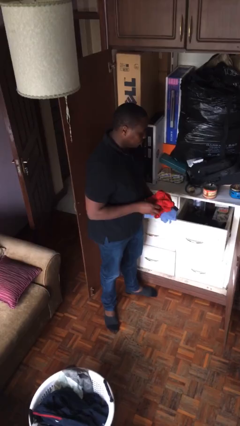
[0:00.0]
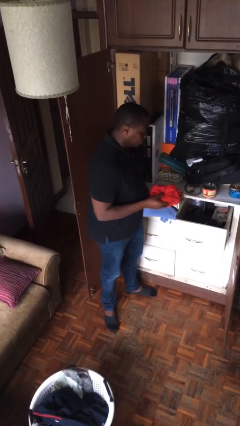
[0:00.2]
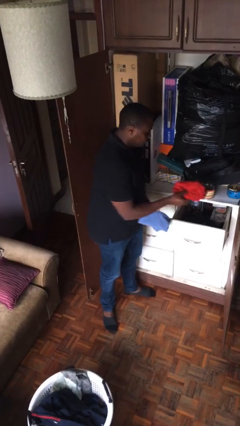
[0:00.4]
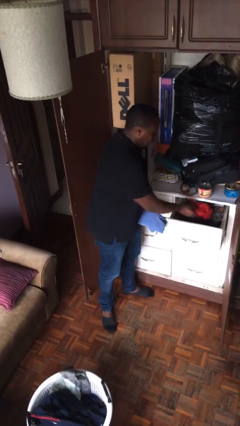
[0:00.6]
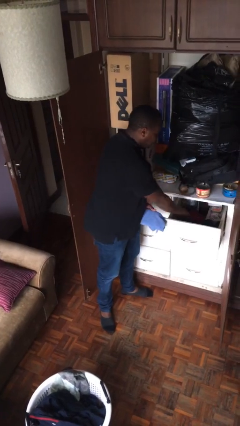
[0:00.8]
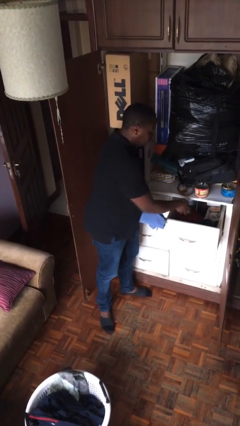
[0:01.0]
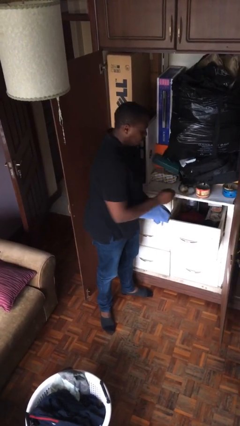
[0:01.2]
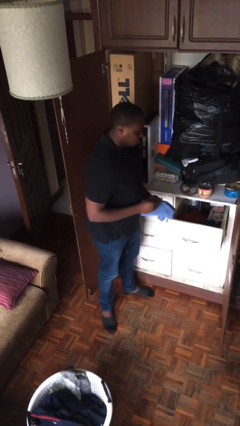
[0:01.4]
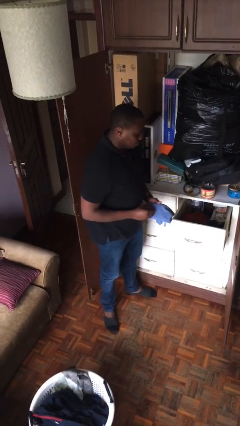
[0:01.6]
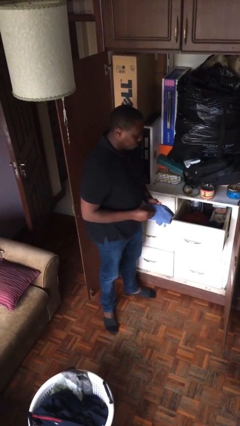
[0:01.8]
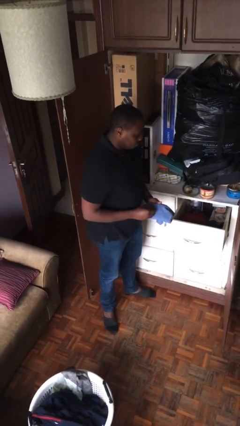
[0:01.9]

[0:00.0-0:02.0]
person puts clothes into dresser

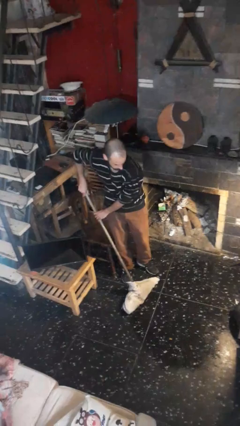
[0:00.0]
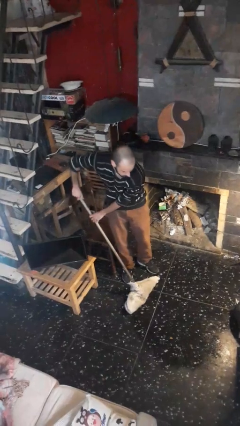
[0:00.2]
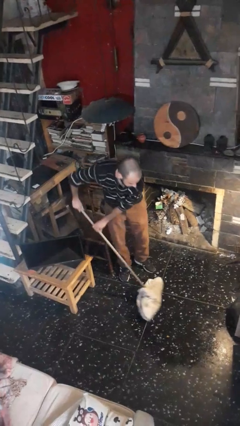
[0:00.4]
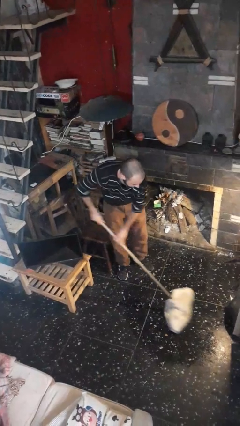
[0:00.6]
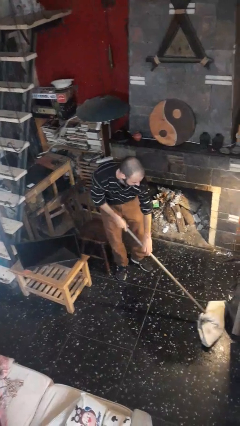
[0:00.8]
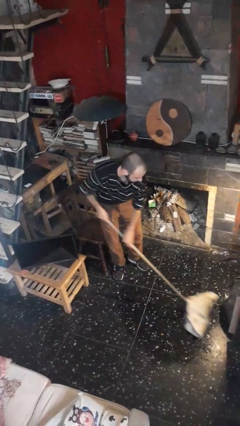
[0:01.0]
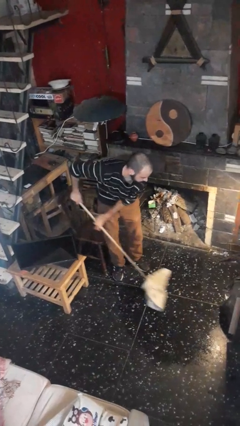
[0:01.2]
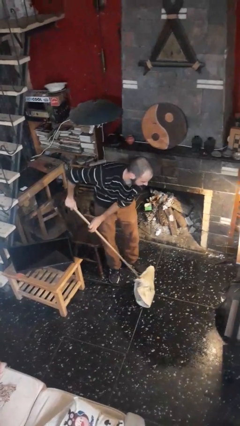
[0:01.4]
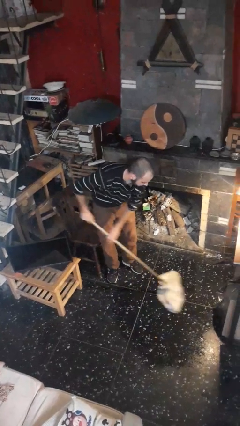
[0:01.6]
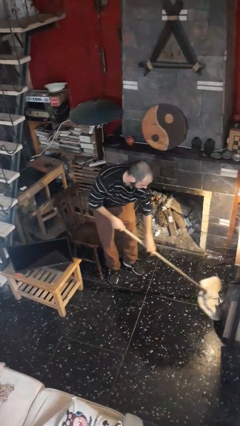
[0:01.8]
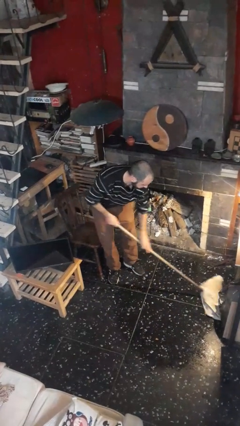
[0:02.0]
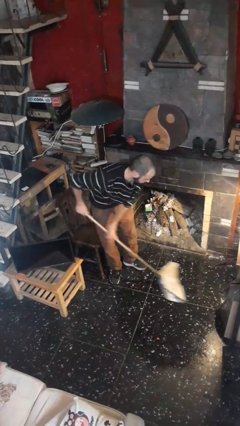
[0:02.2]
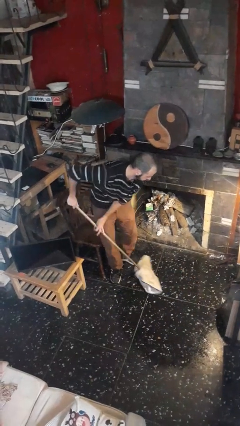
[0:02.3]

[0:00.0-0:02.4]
person mops

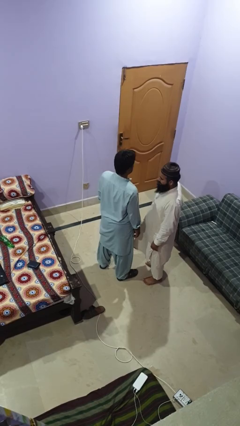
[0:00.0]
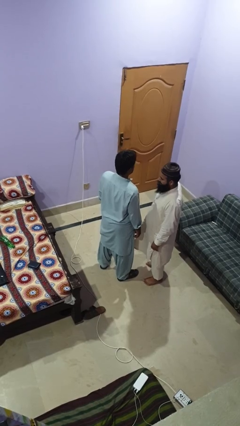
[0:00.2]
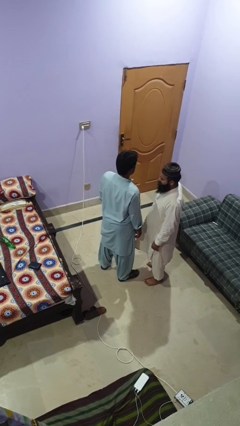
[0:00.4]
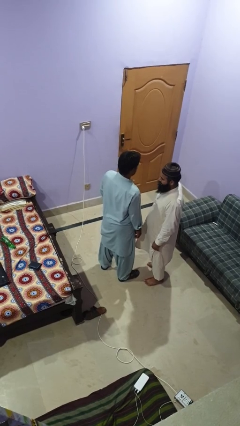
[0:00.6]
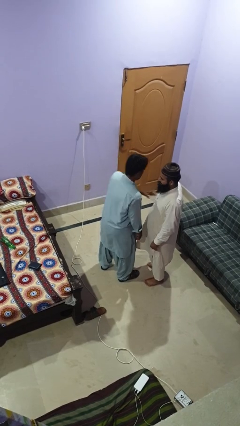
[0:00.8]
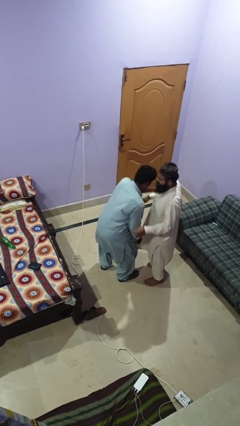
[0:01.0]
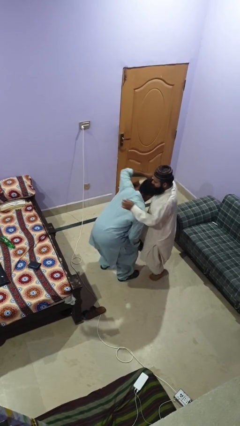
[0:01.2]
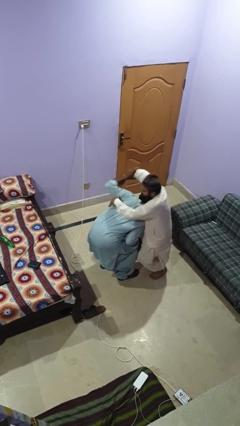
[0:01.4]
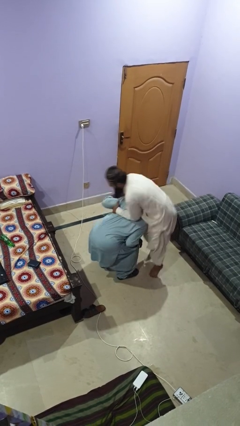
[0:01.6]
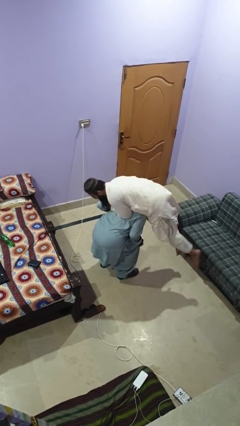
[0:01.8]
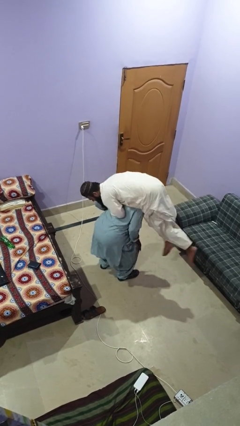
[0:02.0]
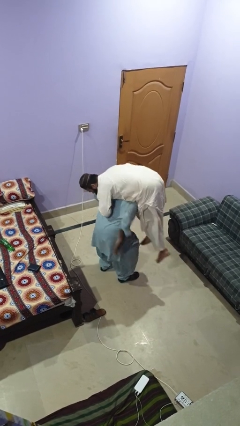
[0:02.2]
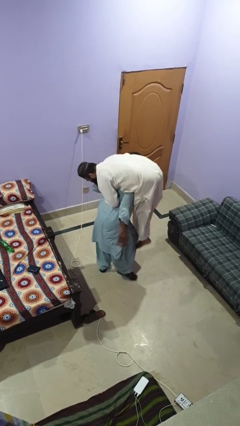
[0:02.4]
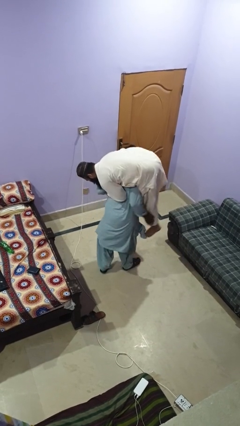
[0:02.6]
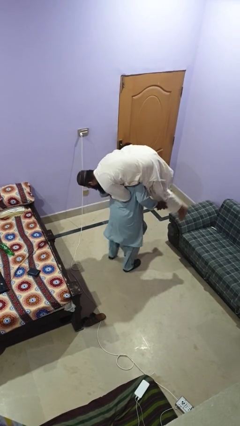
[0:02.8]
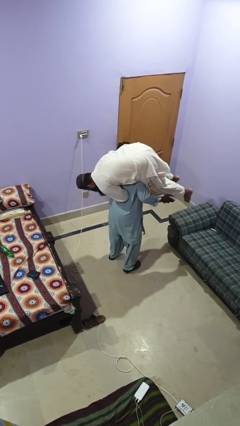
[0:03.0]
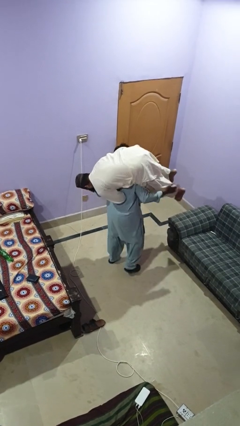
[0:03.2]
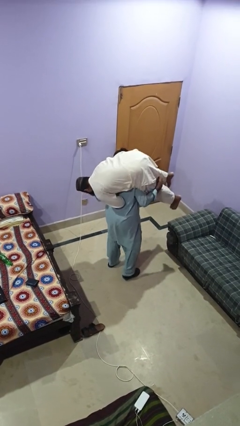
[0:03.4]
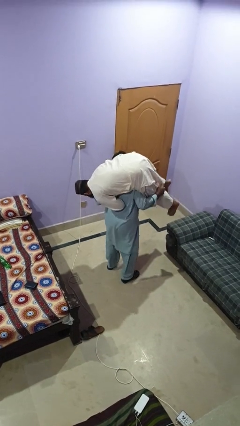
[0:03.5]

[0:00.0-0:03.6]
person carries person on shoulders

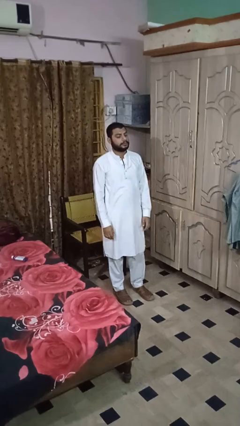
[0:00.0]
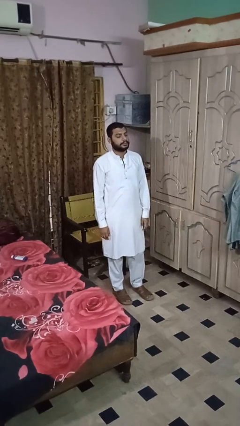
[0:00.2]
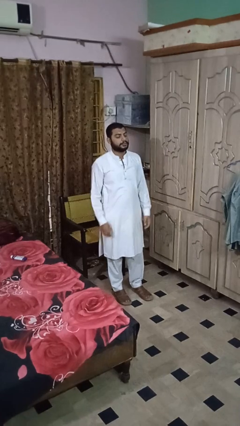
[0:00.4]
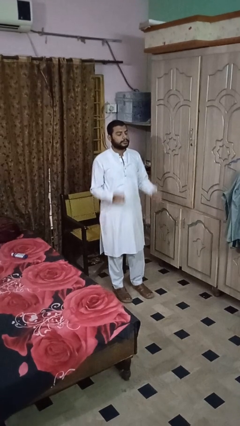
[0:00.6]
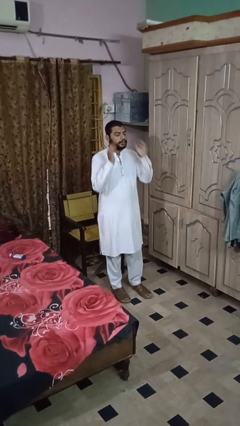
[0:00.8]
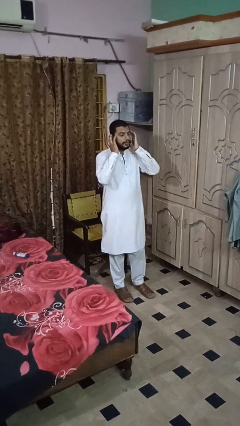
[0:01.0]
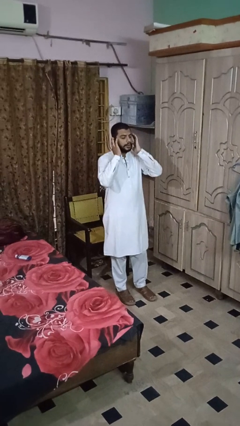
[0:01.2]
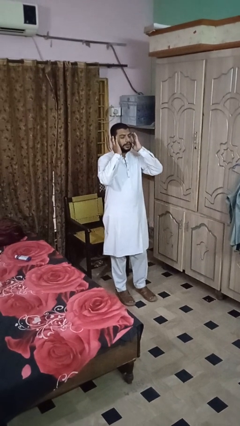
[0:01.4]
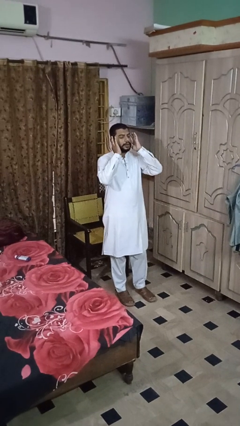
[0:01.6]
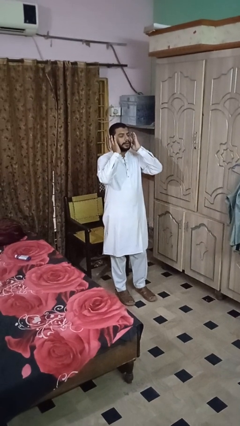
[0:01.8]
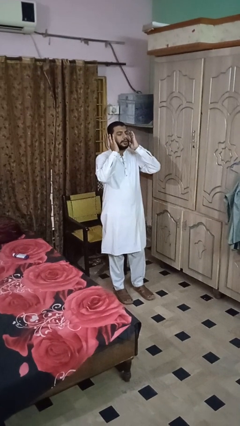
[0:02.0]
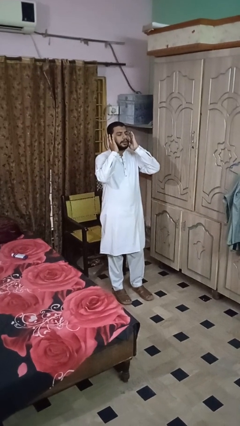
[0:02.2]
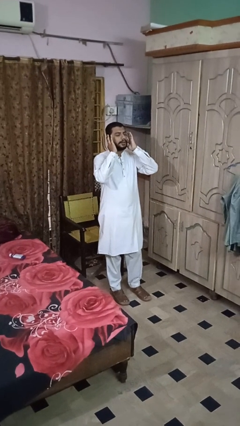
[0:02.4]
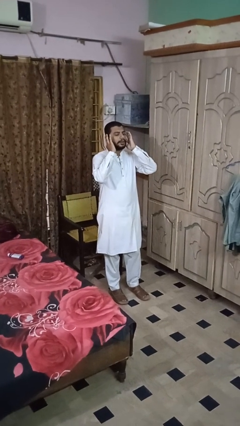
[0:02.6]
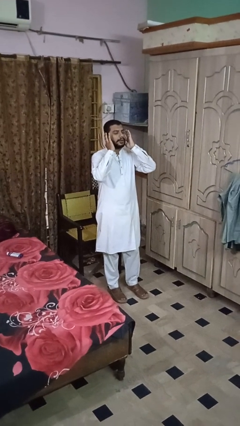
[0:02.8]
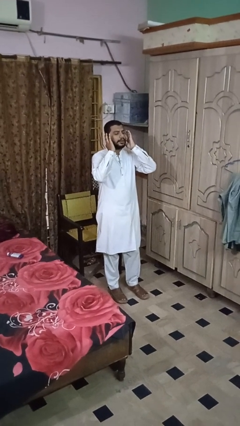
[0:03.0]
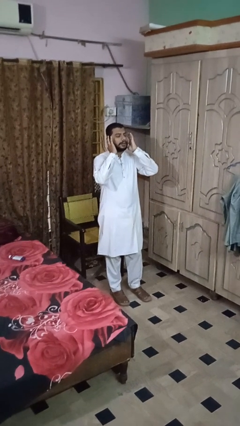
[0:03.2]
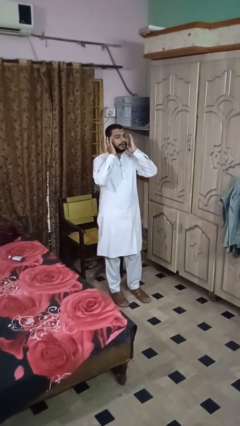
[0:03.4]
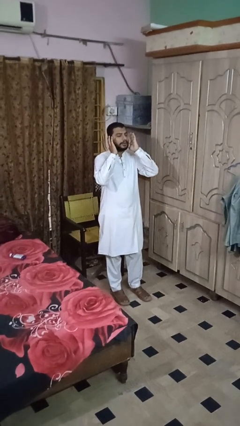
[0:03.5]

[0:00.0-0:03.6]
person puts fingers in ear

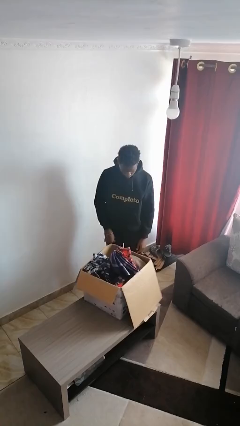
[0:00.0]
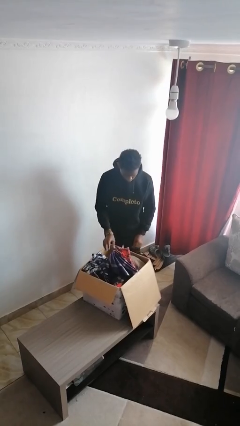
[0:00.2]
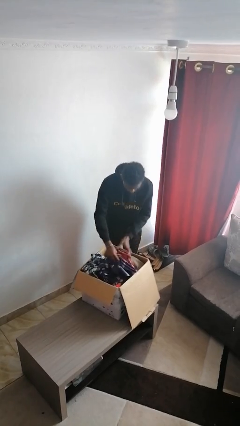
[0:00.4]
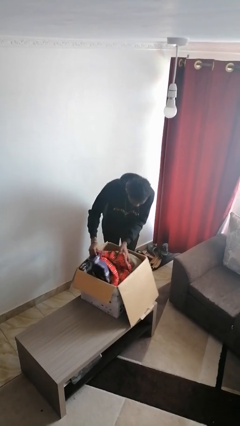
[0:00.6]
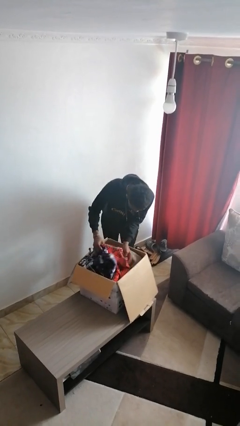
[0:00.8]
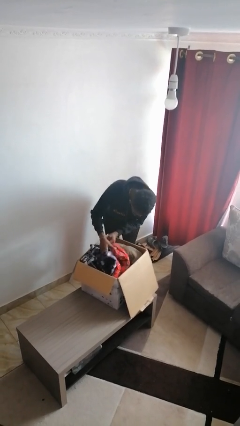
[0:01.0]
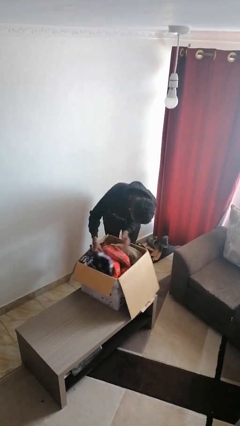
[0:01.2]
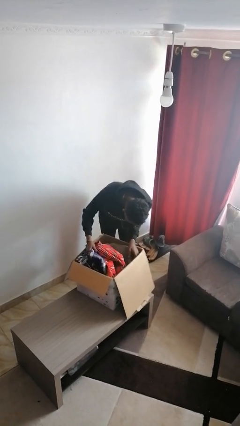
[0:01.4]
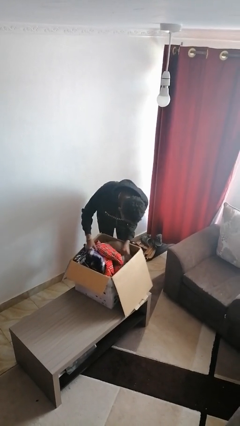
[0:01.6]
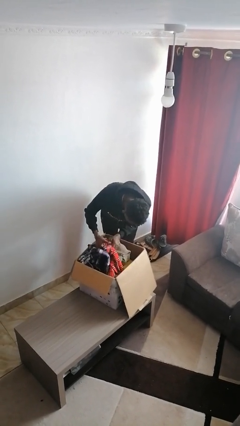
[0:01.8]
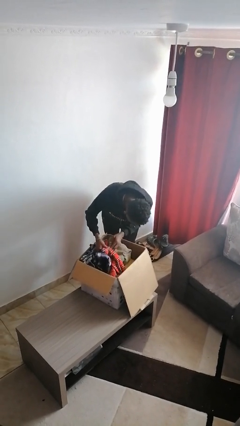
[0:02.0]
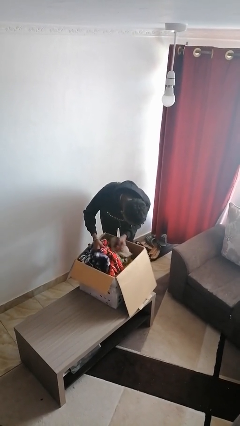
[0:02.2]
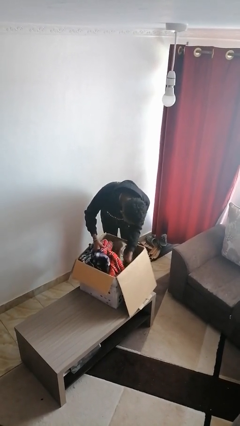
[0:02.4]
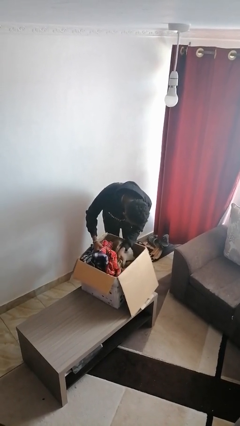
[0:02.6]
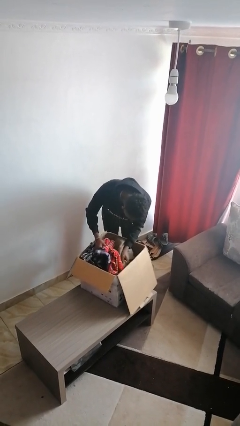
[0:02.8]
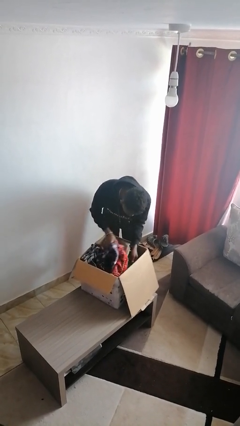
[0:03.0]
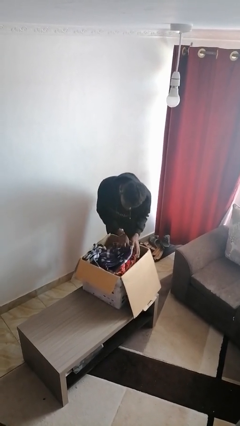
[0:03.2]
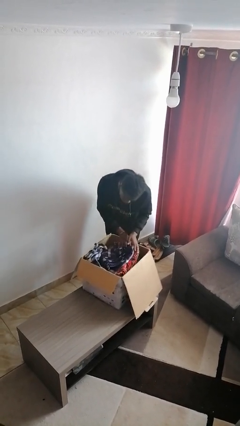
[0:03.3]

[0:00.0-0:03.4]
person searches in box

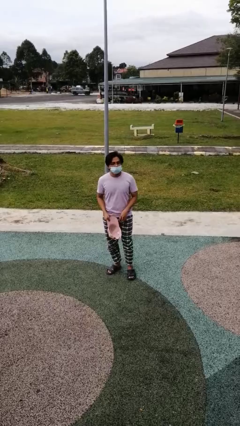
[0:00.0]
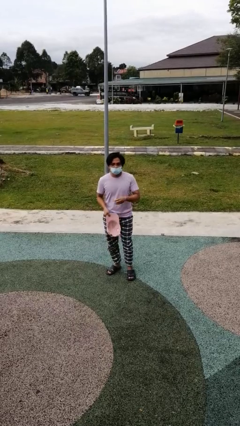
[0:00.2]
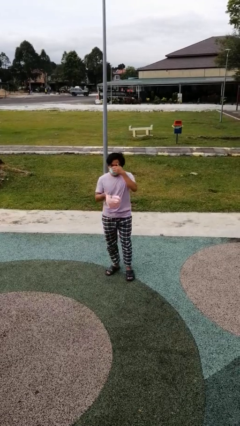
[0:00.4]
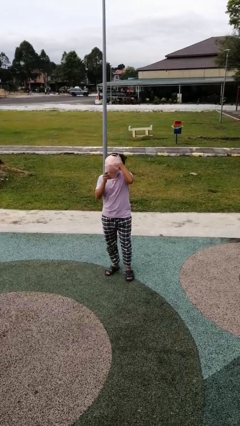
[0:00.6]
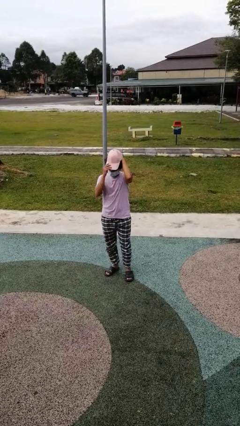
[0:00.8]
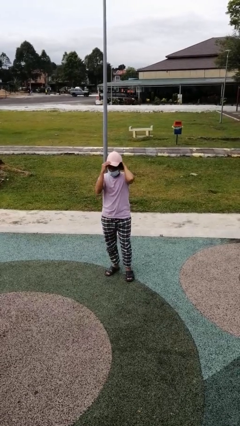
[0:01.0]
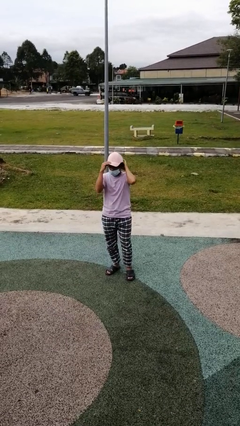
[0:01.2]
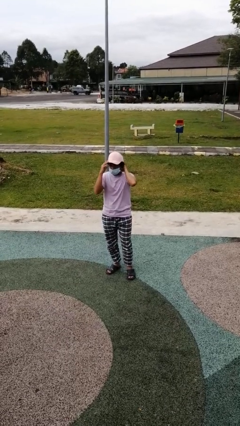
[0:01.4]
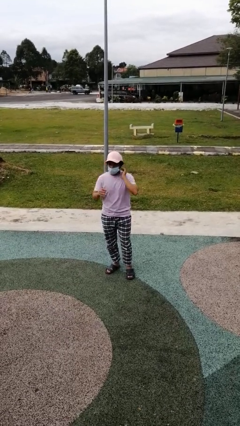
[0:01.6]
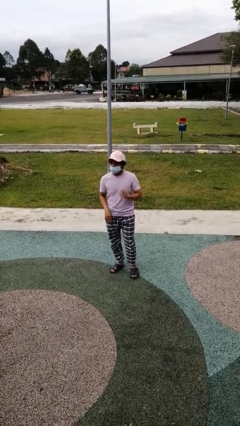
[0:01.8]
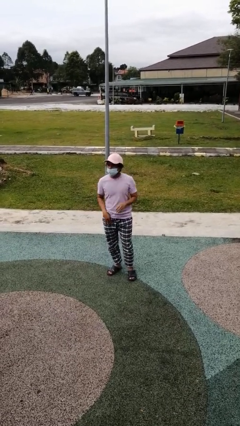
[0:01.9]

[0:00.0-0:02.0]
person puts on hat

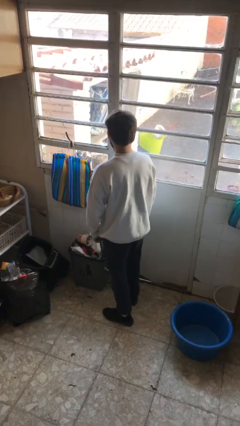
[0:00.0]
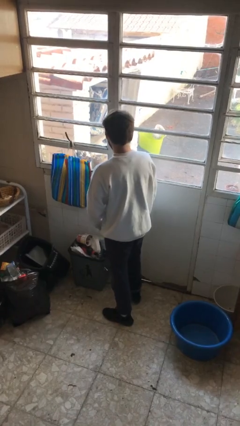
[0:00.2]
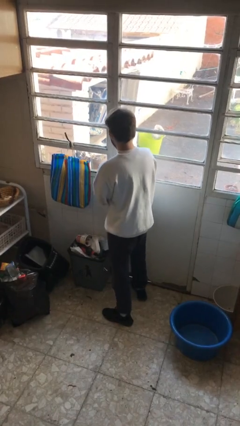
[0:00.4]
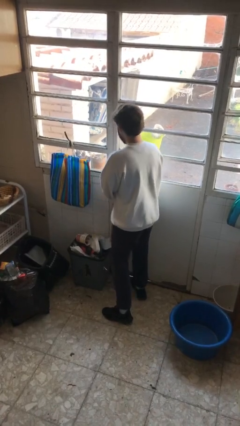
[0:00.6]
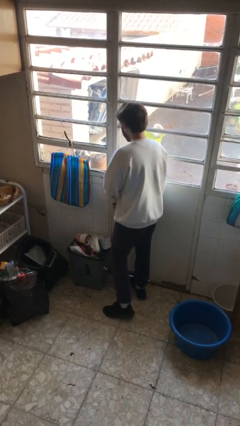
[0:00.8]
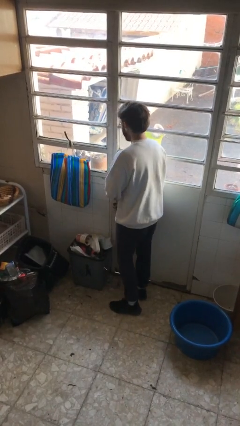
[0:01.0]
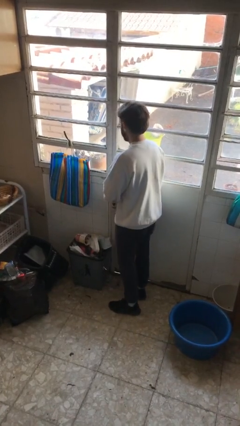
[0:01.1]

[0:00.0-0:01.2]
person unlocks door with keys
